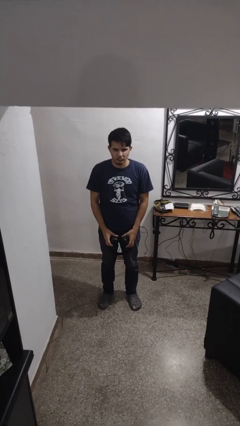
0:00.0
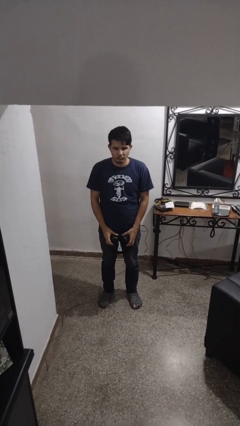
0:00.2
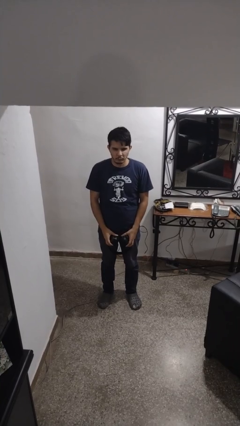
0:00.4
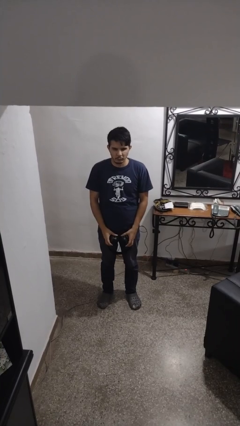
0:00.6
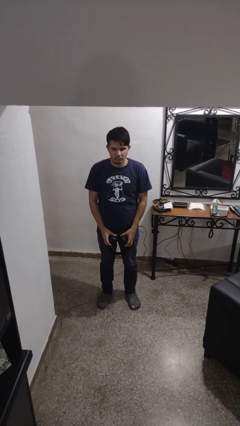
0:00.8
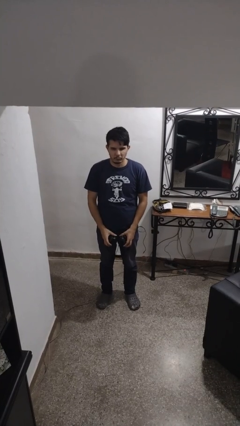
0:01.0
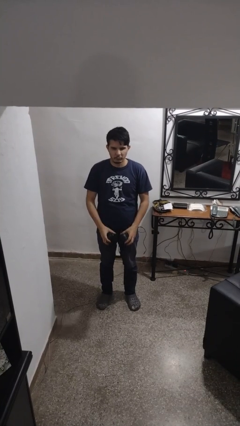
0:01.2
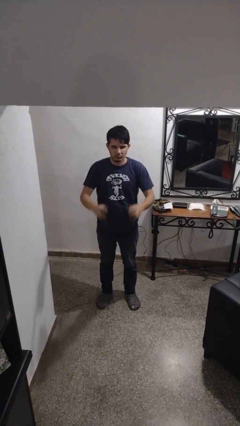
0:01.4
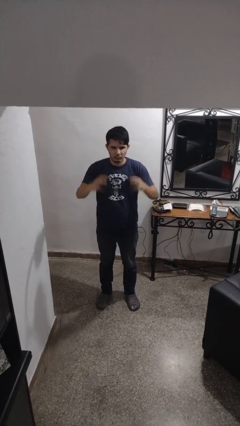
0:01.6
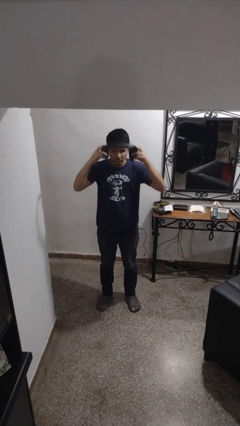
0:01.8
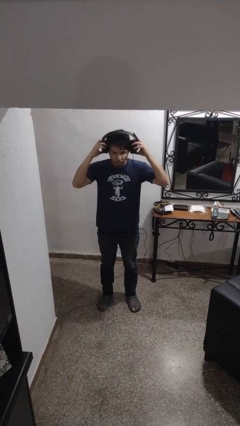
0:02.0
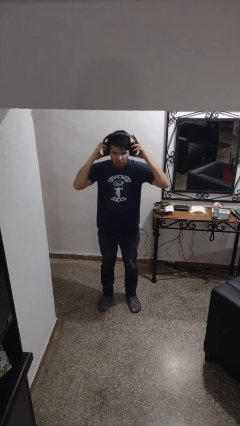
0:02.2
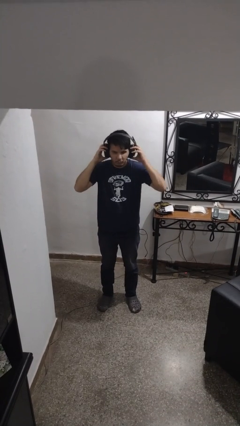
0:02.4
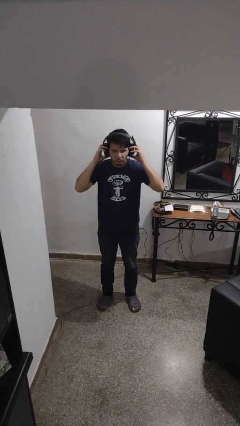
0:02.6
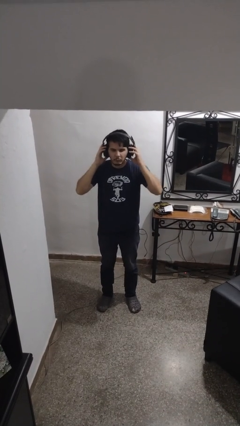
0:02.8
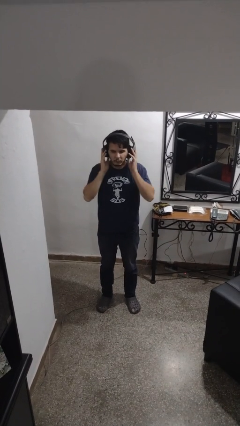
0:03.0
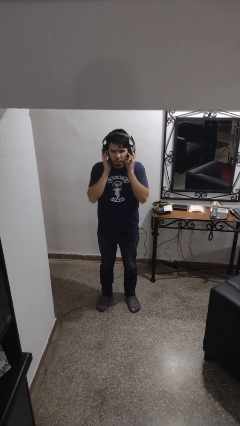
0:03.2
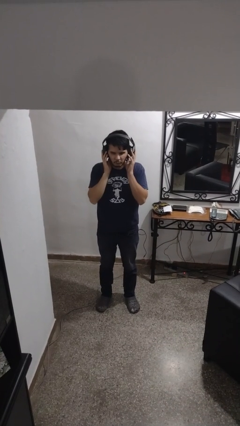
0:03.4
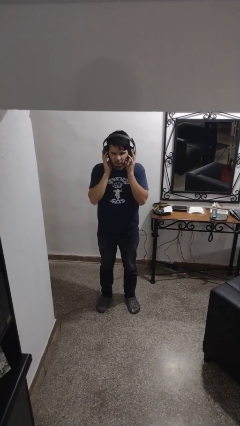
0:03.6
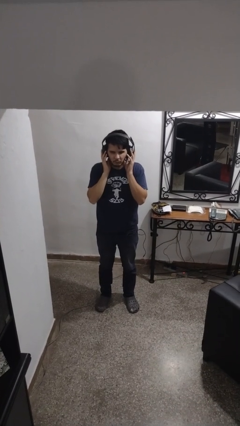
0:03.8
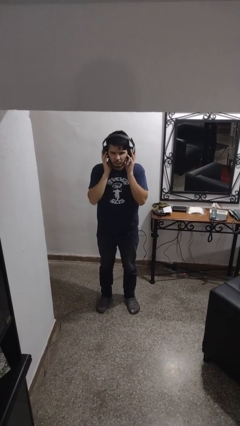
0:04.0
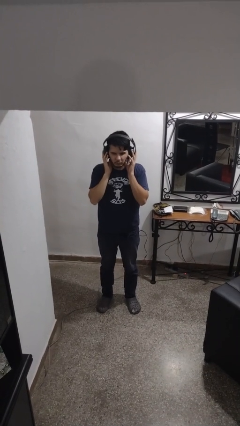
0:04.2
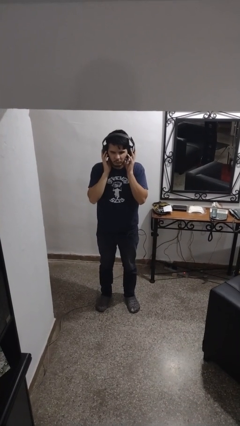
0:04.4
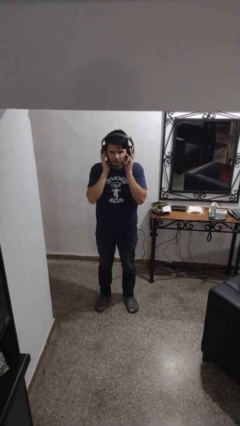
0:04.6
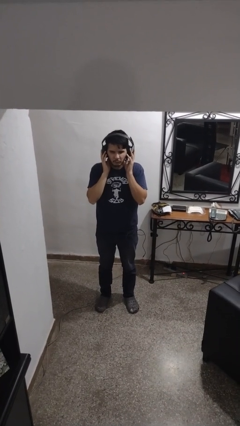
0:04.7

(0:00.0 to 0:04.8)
person puts on headphones

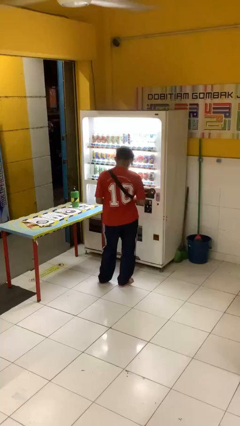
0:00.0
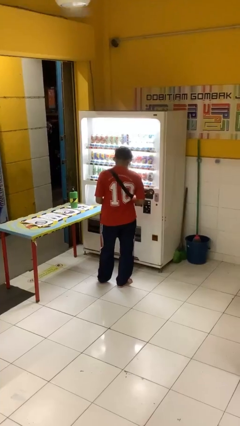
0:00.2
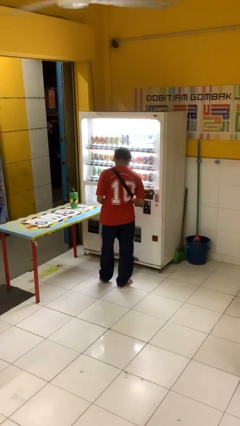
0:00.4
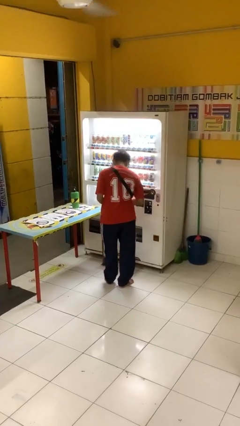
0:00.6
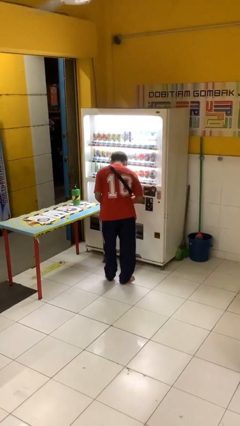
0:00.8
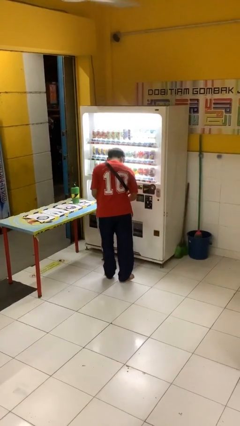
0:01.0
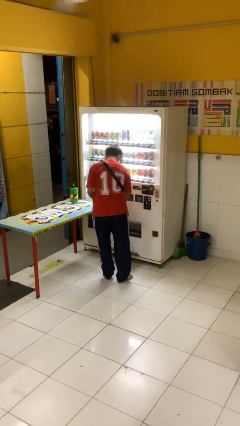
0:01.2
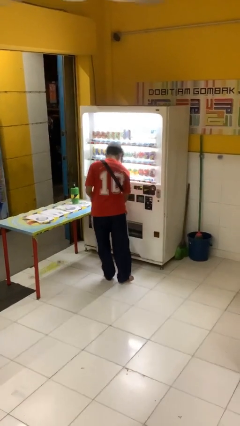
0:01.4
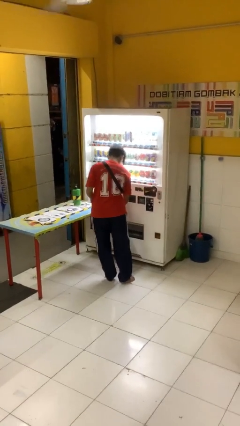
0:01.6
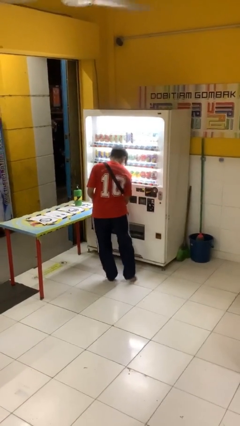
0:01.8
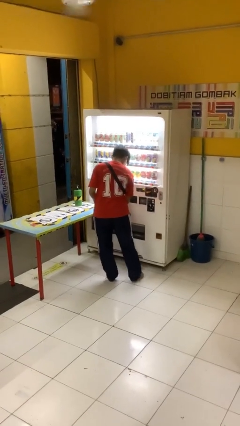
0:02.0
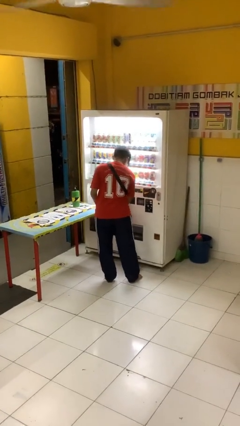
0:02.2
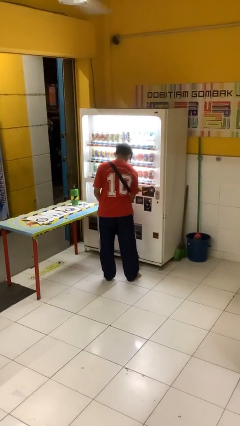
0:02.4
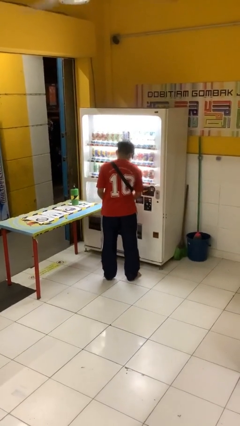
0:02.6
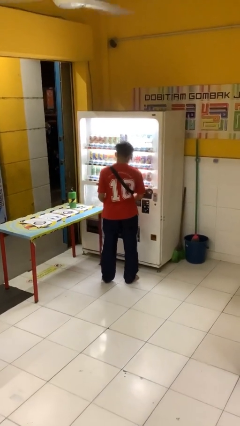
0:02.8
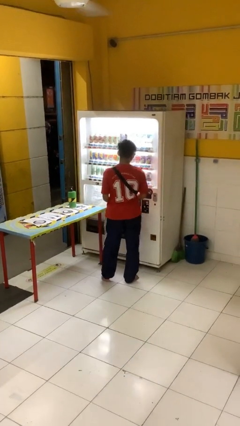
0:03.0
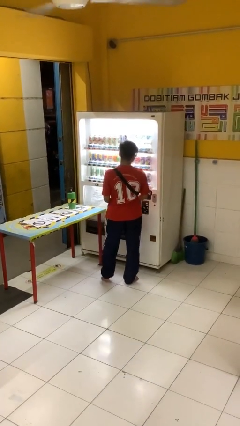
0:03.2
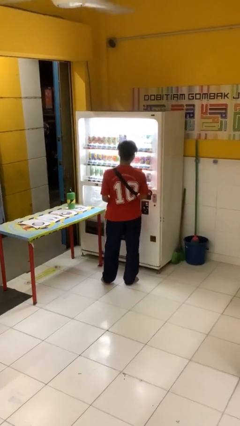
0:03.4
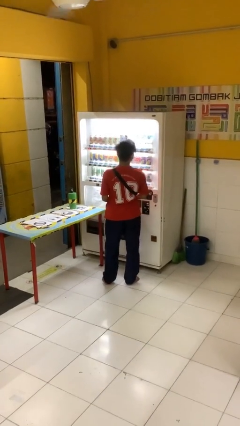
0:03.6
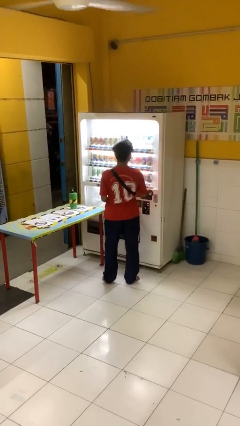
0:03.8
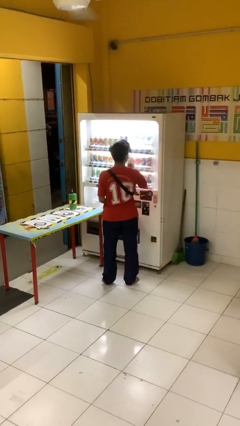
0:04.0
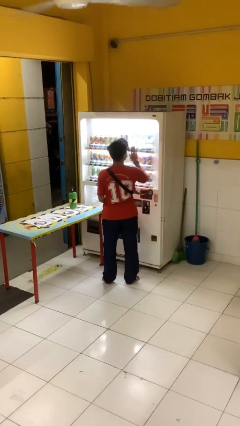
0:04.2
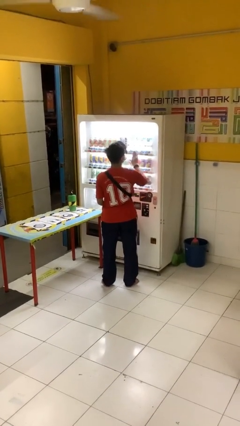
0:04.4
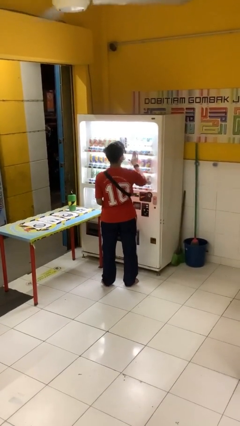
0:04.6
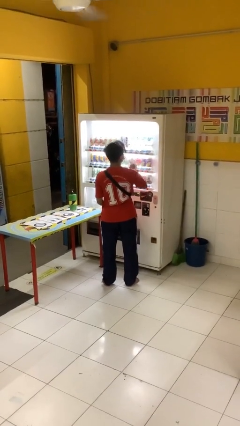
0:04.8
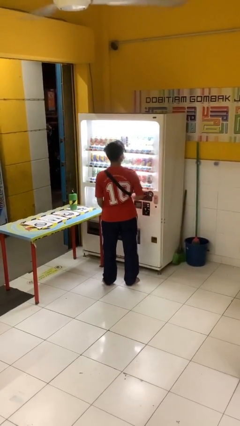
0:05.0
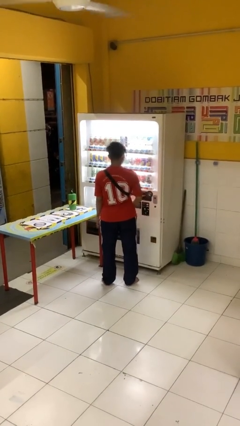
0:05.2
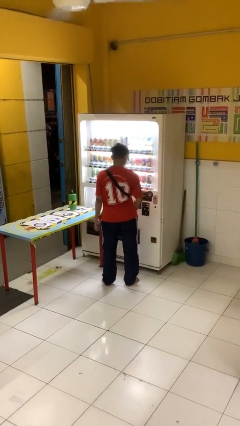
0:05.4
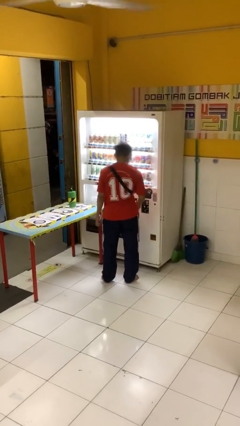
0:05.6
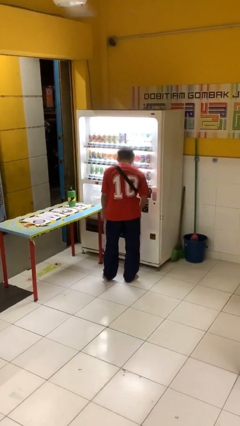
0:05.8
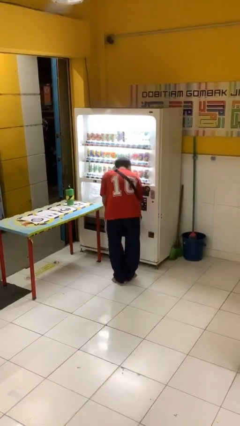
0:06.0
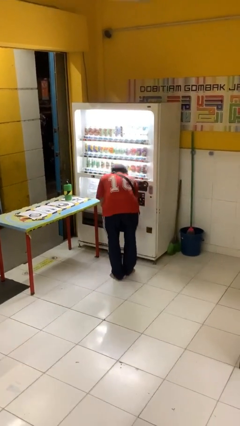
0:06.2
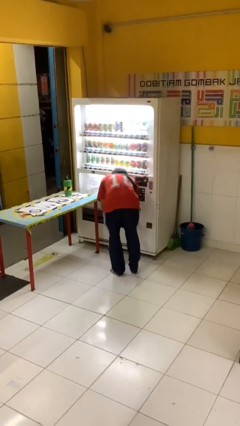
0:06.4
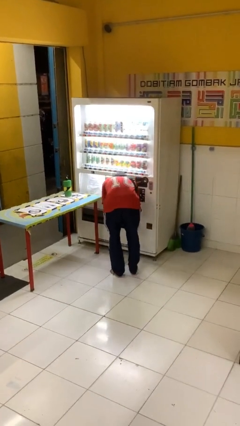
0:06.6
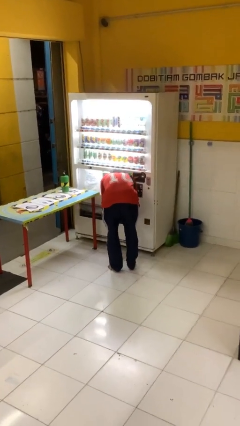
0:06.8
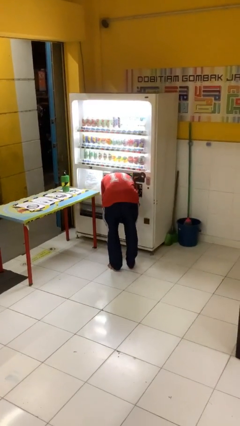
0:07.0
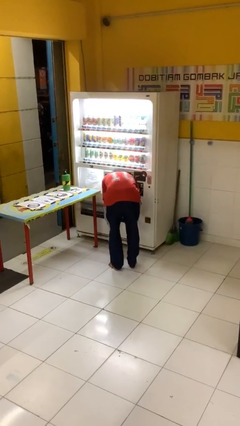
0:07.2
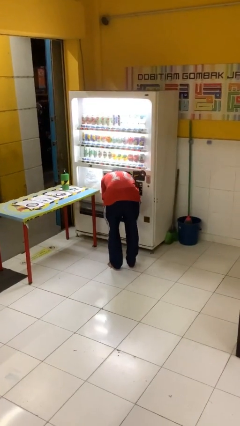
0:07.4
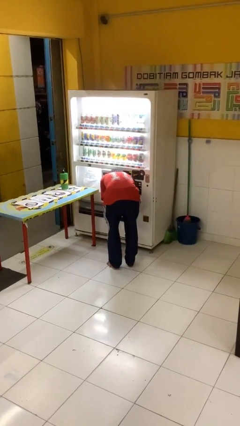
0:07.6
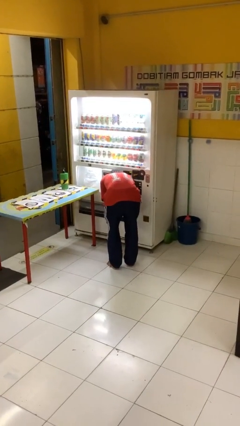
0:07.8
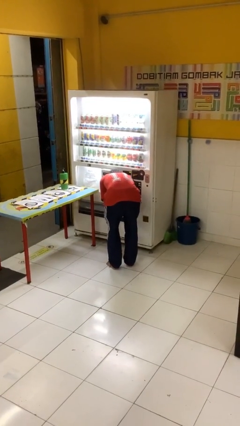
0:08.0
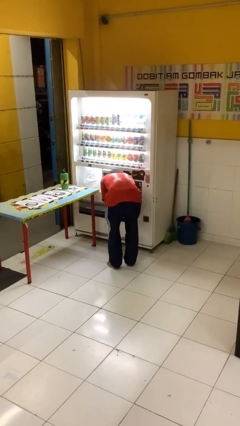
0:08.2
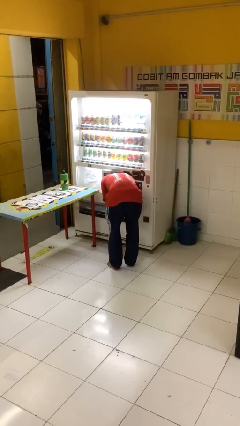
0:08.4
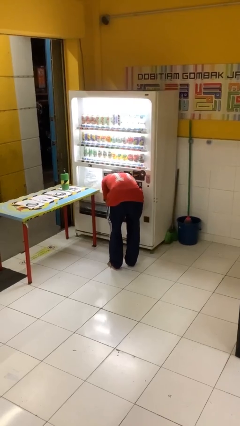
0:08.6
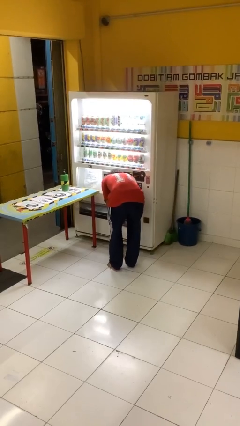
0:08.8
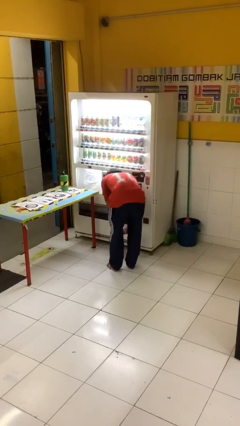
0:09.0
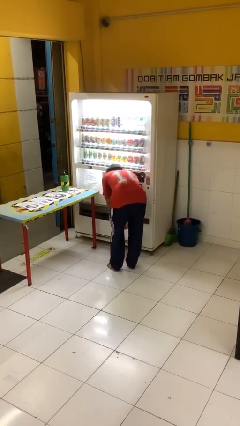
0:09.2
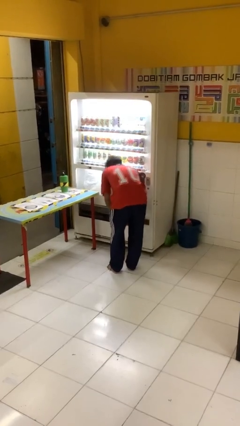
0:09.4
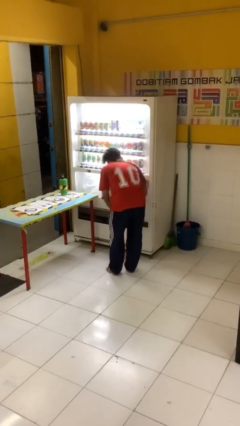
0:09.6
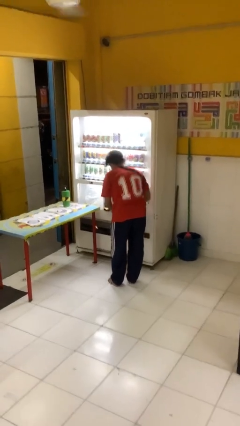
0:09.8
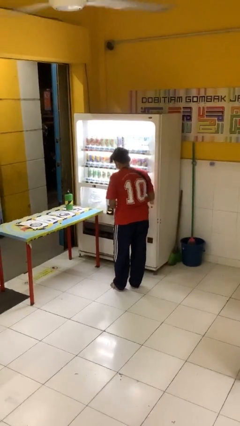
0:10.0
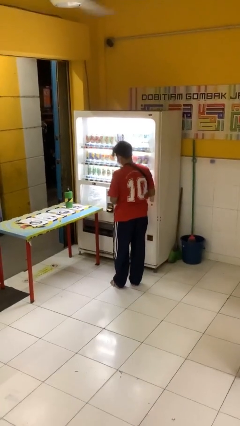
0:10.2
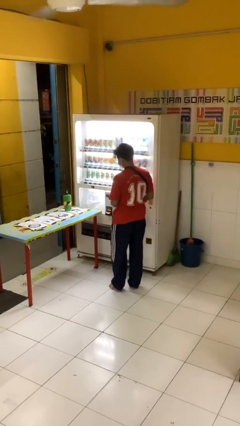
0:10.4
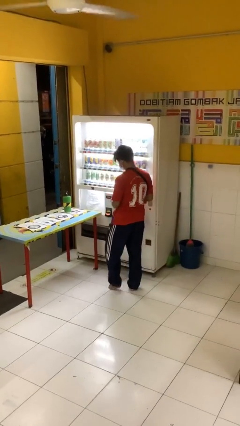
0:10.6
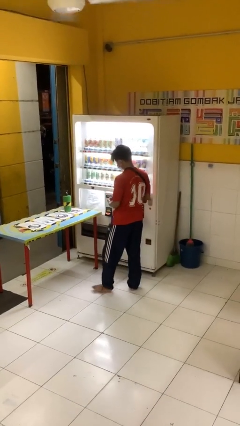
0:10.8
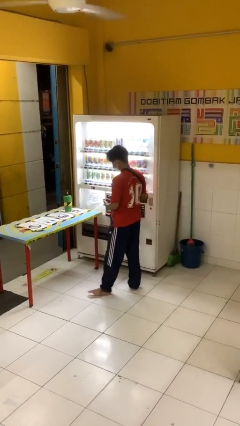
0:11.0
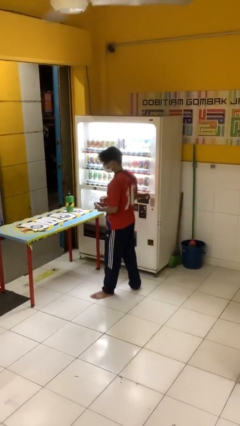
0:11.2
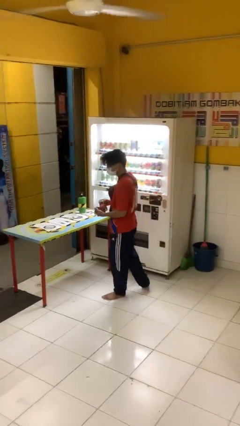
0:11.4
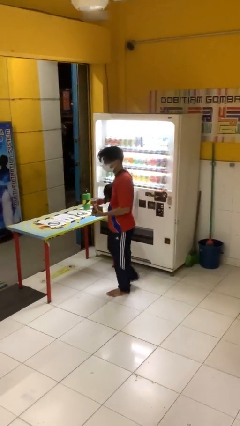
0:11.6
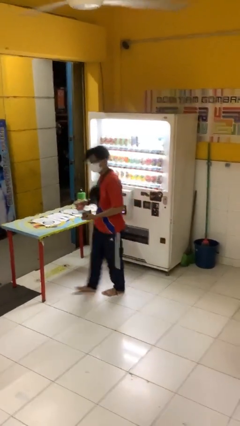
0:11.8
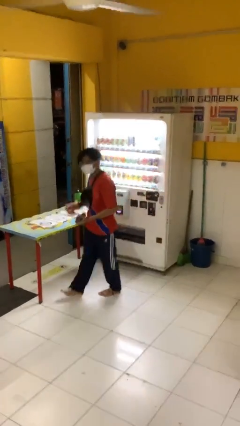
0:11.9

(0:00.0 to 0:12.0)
person purchases from machine

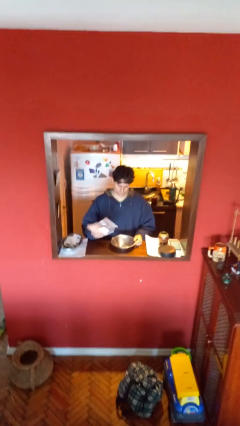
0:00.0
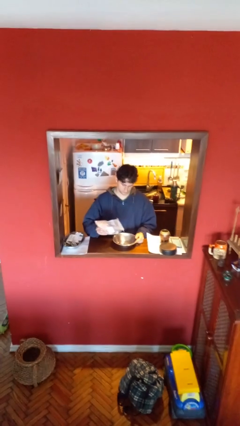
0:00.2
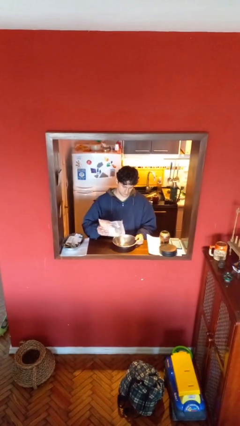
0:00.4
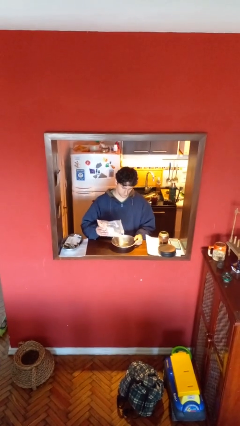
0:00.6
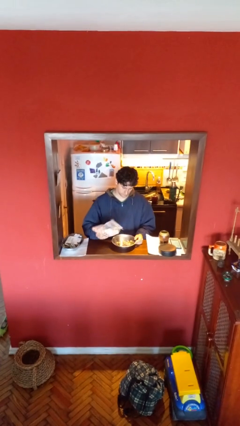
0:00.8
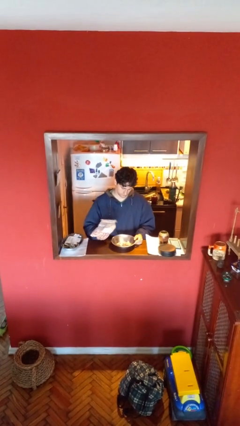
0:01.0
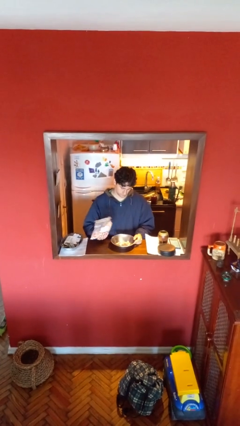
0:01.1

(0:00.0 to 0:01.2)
person pours into bowl

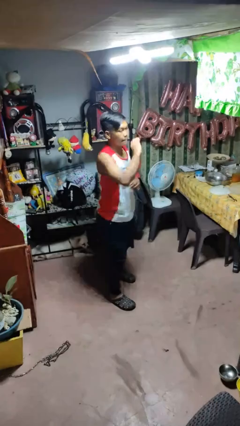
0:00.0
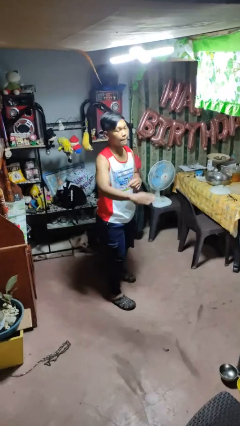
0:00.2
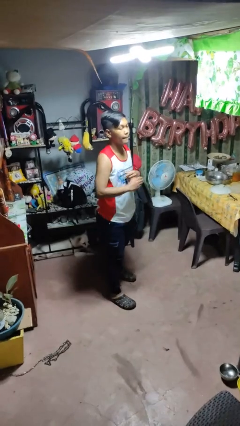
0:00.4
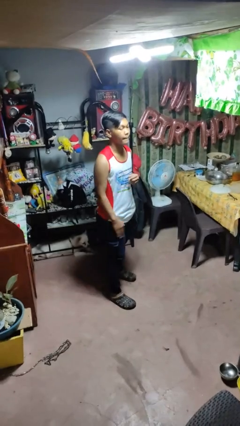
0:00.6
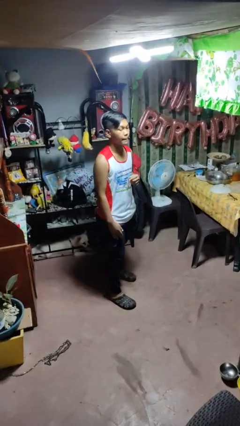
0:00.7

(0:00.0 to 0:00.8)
person karate chop
